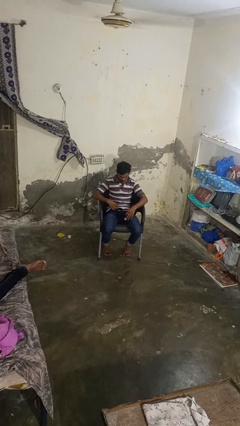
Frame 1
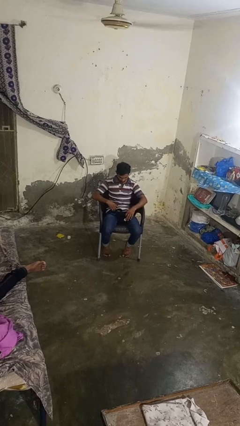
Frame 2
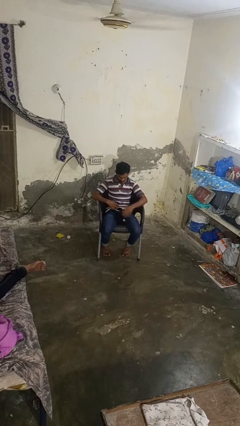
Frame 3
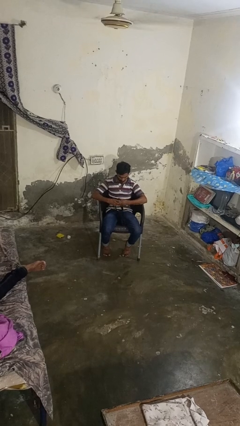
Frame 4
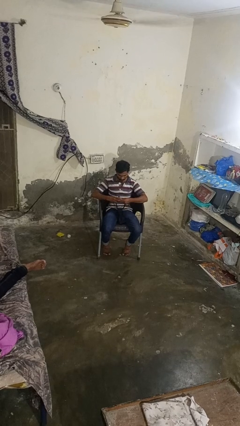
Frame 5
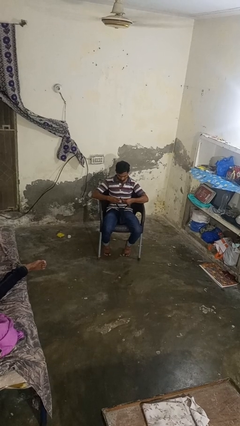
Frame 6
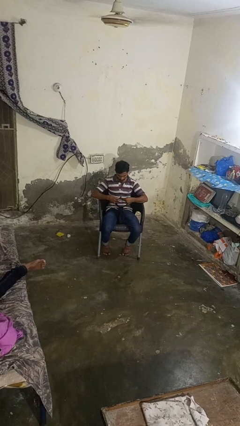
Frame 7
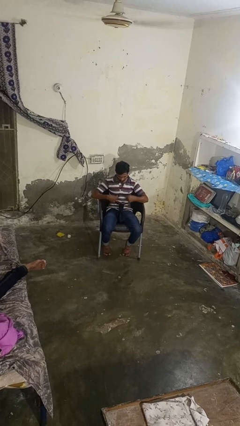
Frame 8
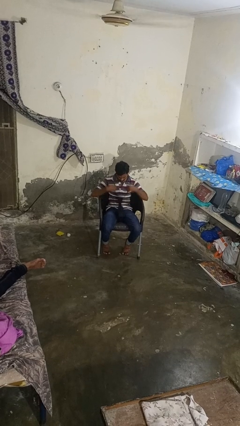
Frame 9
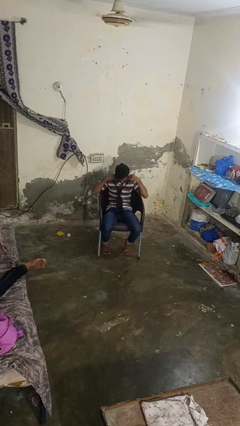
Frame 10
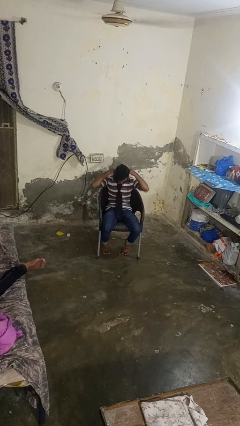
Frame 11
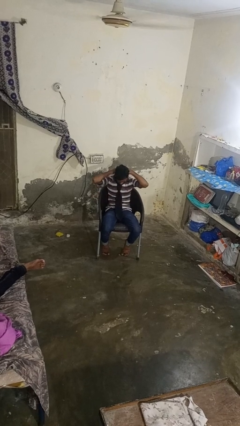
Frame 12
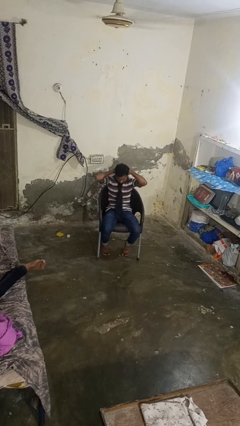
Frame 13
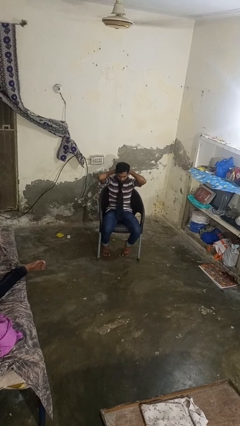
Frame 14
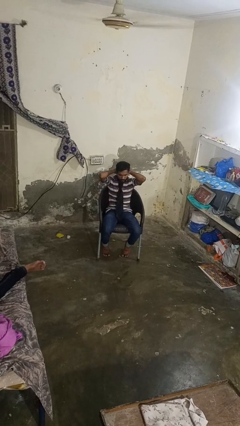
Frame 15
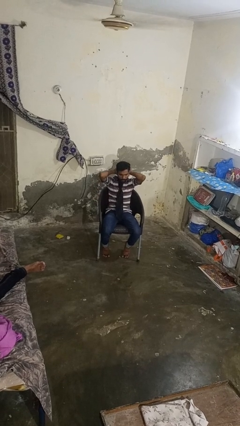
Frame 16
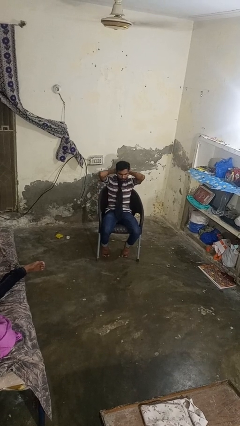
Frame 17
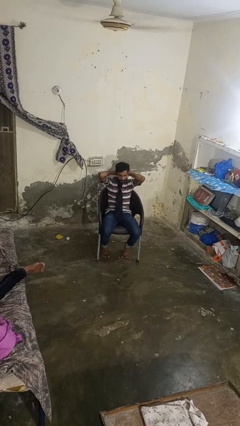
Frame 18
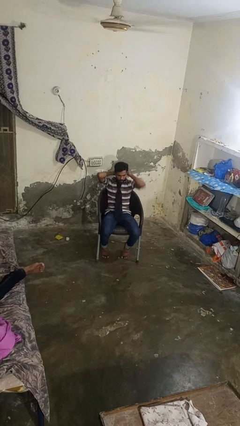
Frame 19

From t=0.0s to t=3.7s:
person puts on necktie

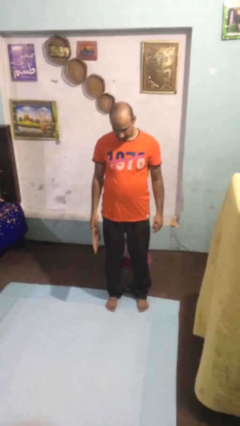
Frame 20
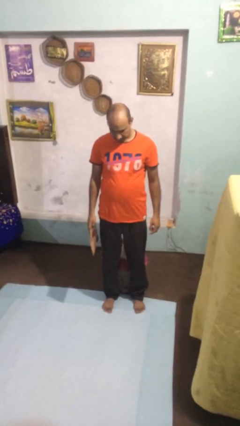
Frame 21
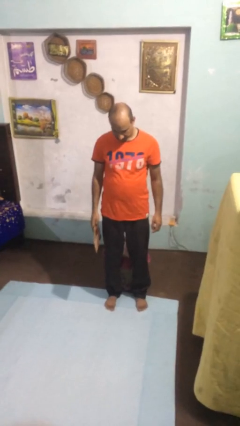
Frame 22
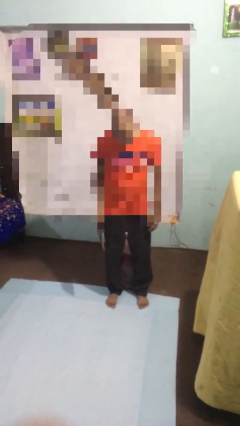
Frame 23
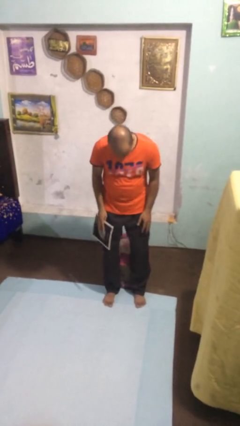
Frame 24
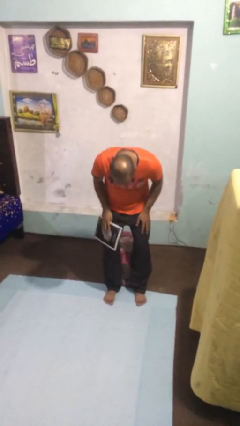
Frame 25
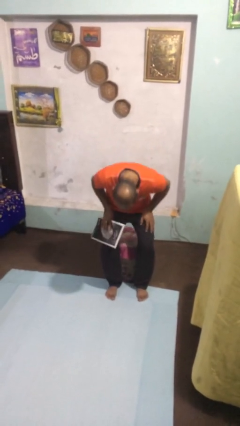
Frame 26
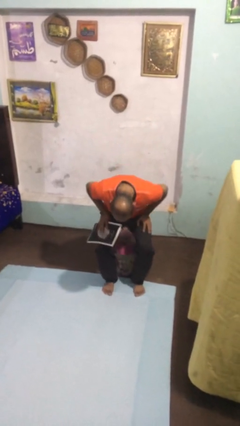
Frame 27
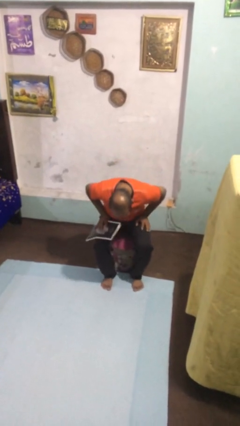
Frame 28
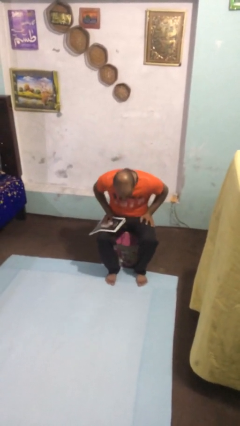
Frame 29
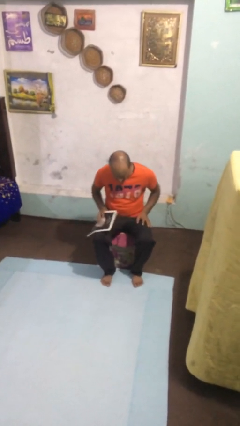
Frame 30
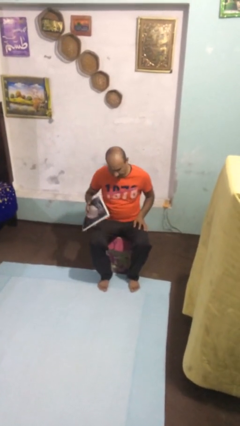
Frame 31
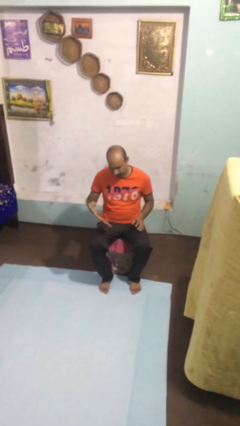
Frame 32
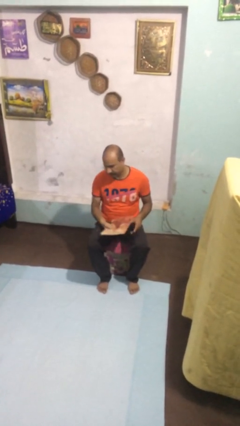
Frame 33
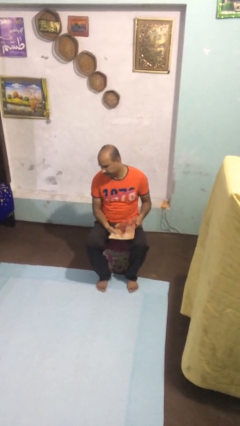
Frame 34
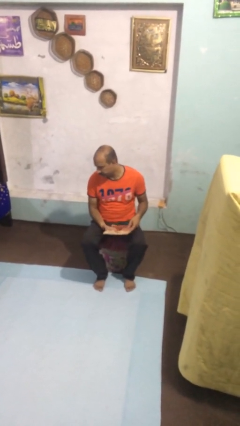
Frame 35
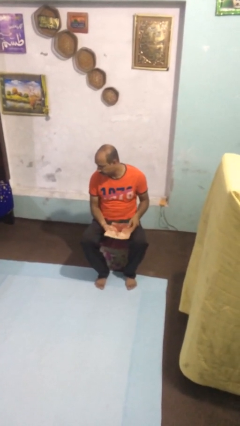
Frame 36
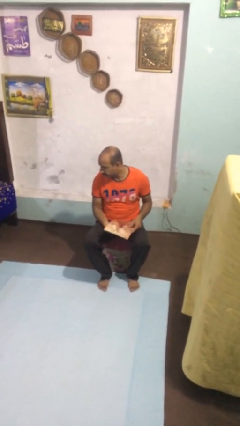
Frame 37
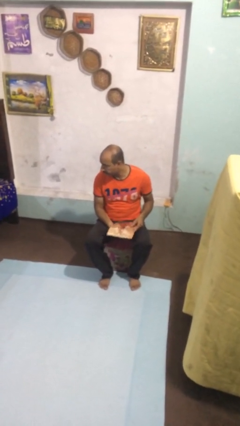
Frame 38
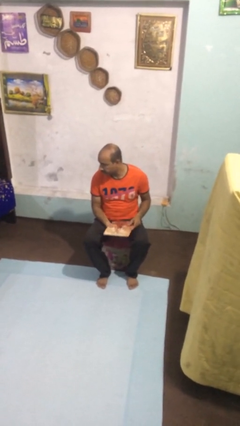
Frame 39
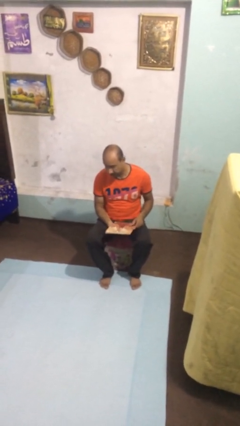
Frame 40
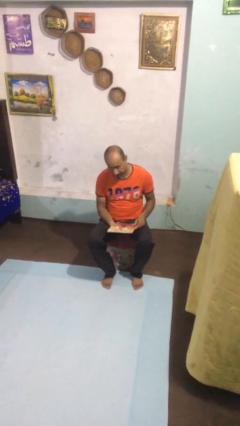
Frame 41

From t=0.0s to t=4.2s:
person sits down

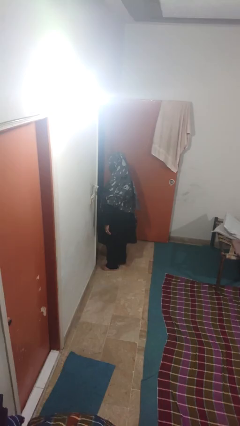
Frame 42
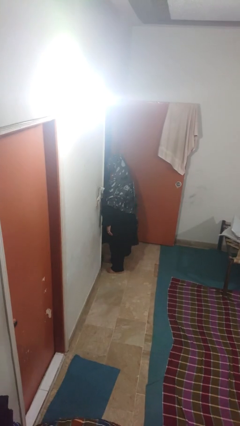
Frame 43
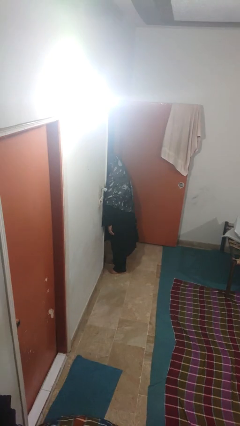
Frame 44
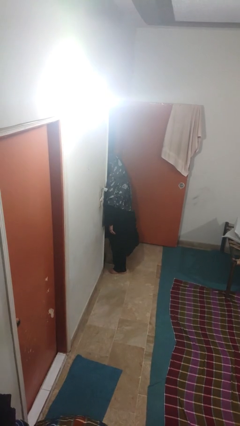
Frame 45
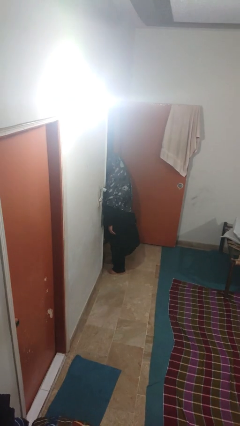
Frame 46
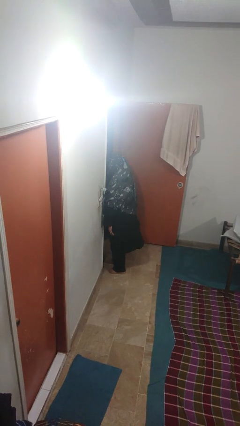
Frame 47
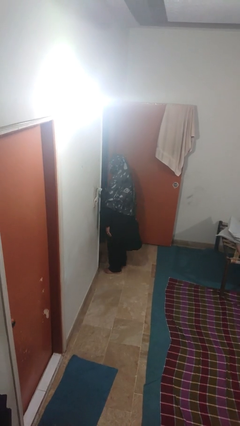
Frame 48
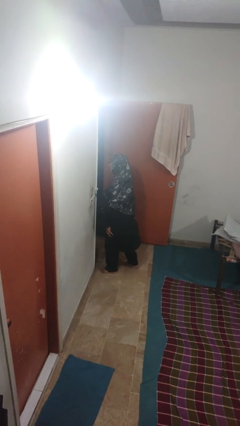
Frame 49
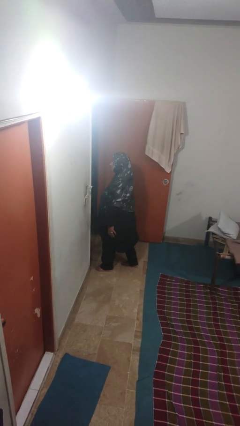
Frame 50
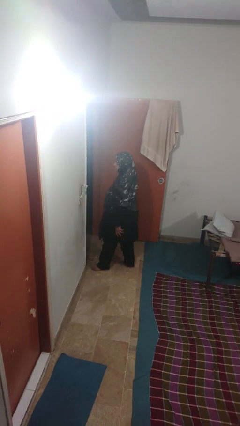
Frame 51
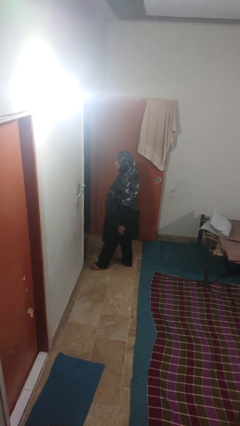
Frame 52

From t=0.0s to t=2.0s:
person bumps into wall

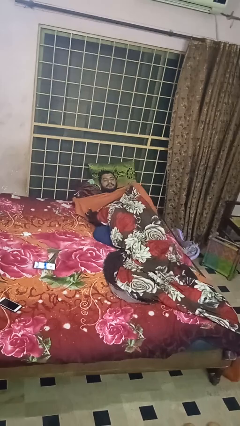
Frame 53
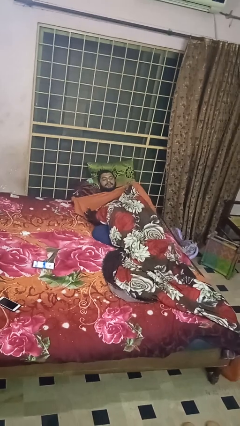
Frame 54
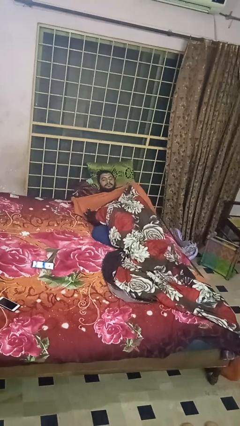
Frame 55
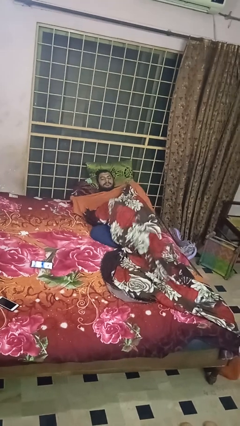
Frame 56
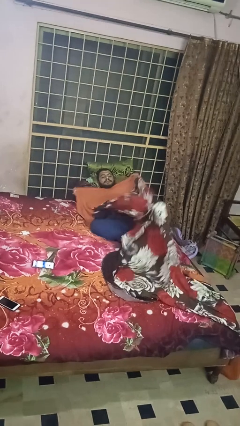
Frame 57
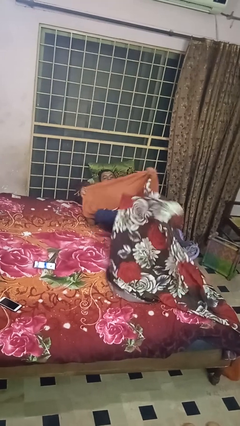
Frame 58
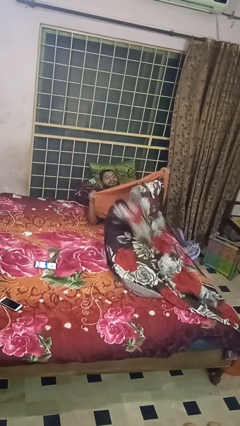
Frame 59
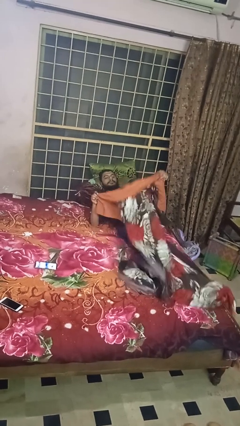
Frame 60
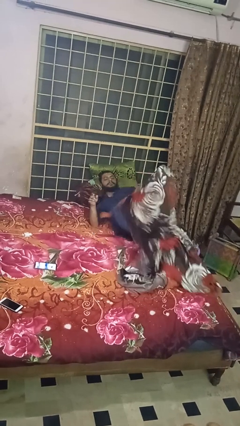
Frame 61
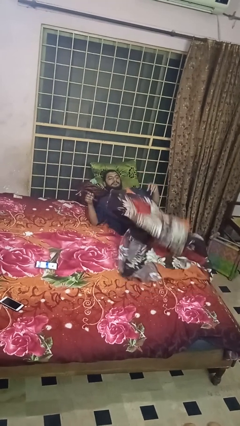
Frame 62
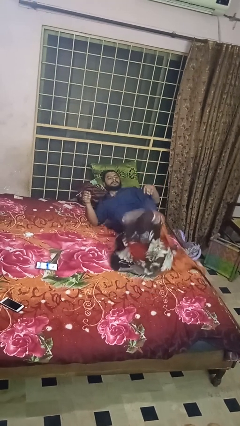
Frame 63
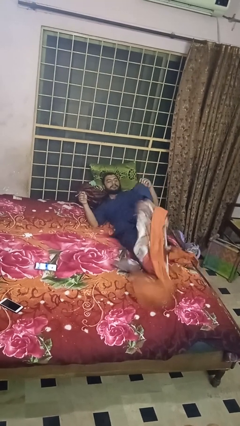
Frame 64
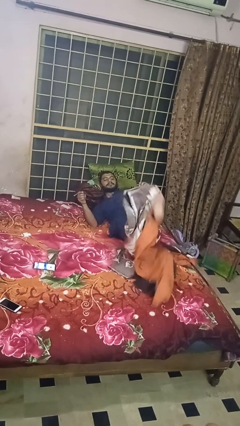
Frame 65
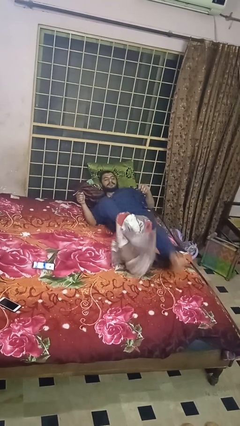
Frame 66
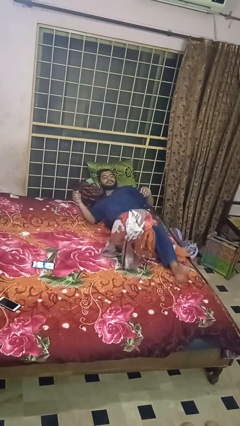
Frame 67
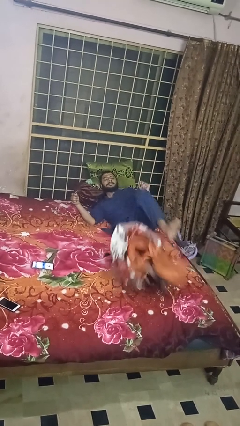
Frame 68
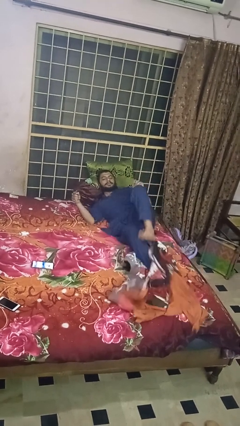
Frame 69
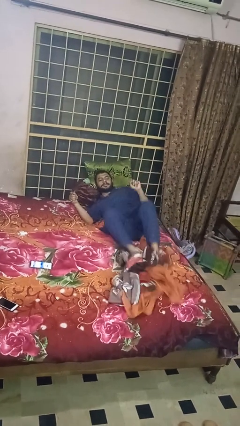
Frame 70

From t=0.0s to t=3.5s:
person uncovers with bedsheets

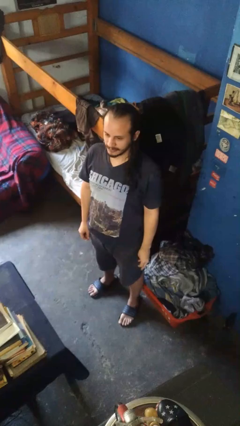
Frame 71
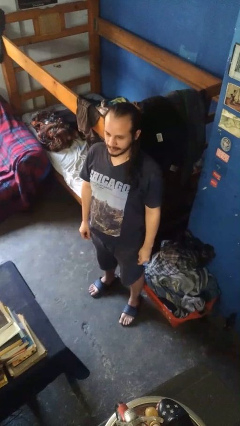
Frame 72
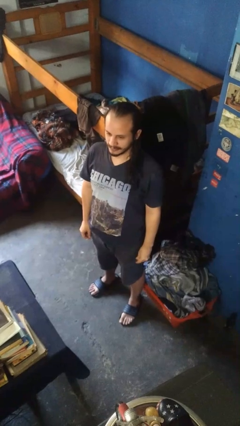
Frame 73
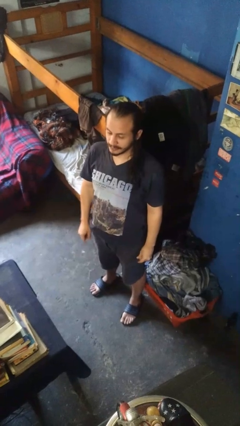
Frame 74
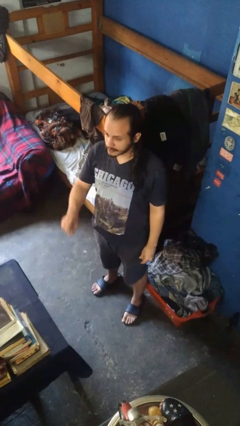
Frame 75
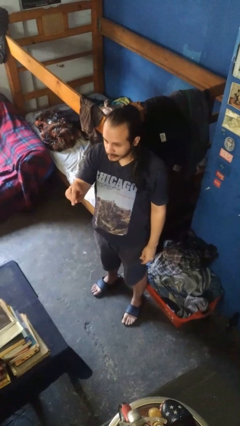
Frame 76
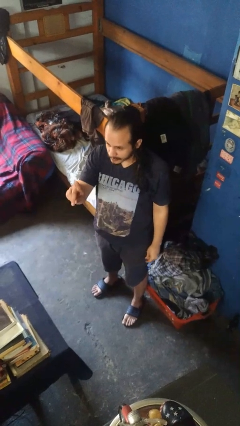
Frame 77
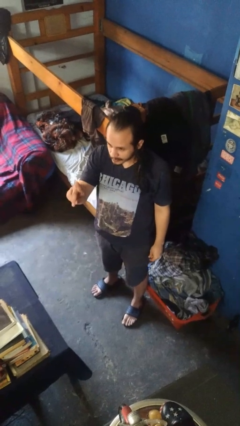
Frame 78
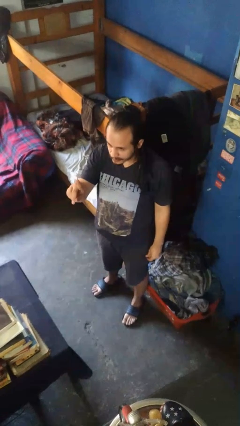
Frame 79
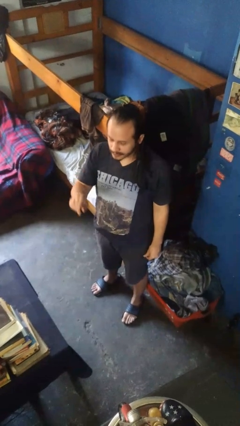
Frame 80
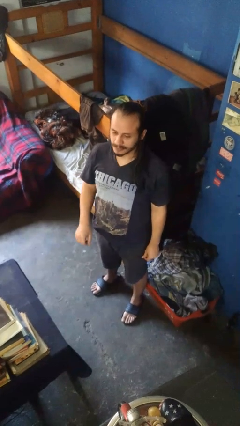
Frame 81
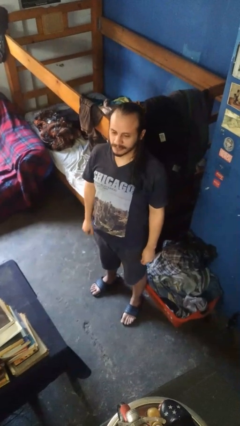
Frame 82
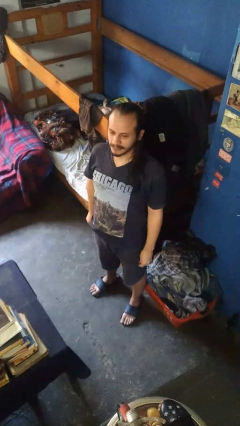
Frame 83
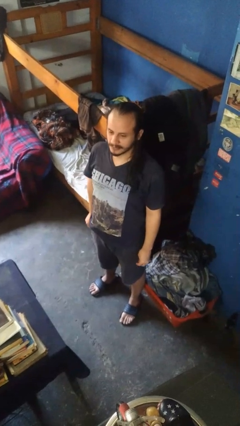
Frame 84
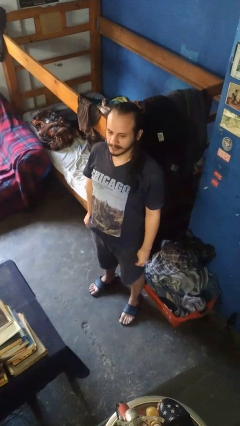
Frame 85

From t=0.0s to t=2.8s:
person gestures number one

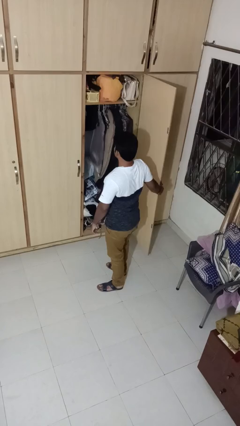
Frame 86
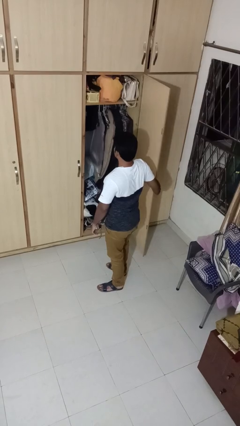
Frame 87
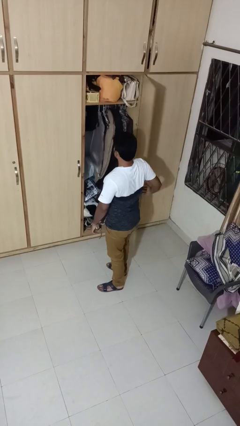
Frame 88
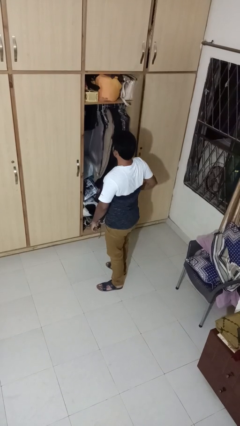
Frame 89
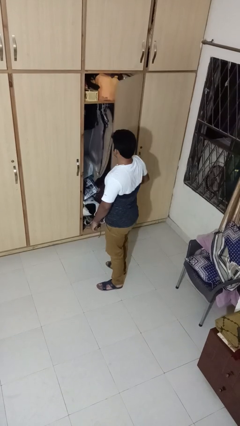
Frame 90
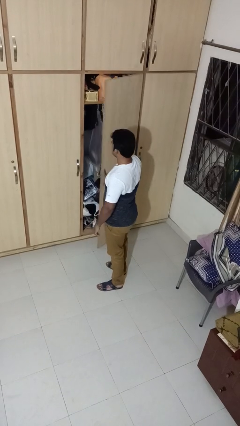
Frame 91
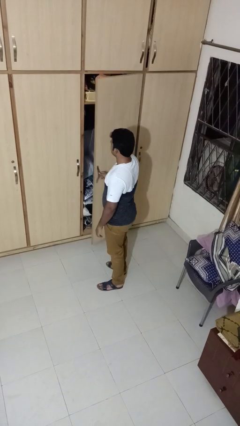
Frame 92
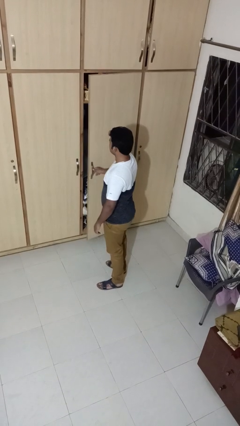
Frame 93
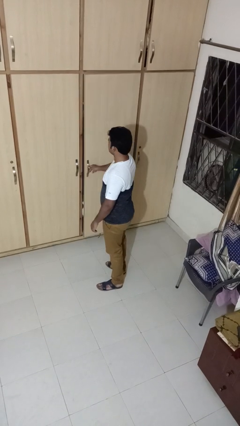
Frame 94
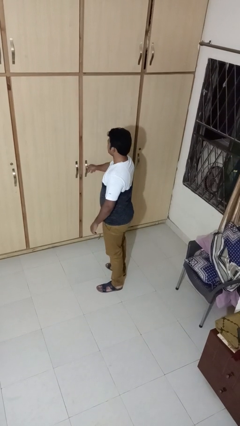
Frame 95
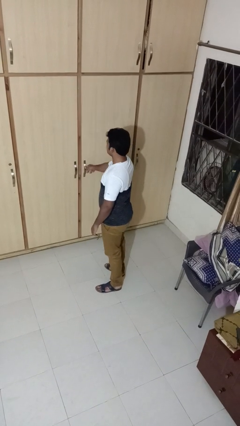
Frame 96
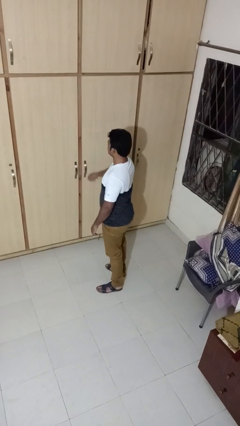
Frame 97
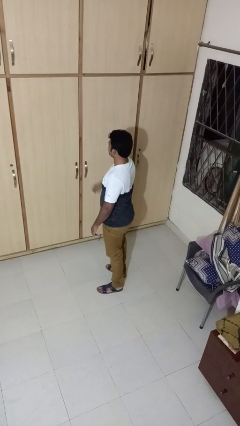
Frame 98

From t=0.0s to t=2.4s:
person closes closet door
